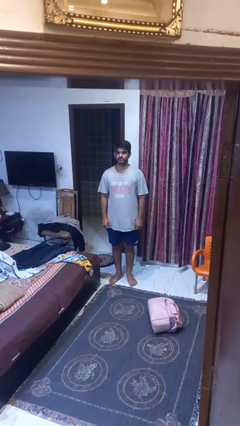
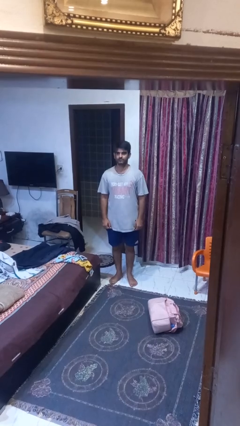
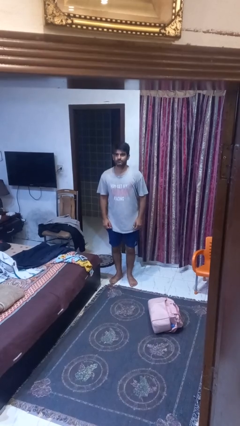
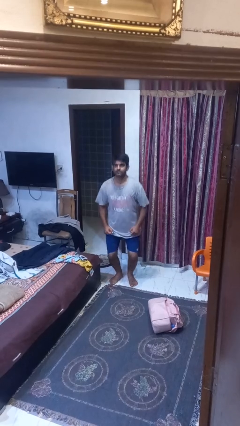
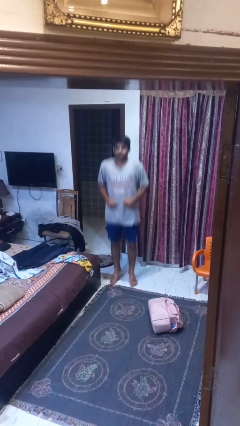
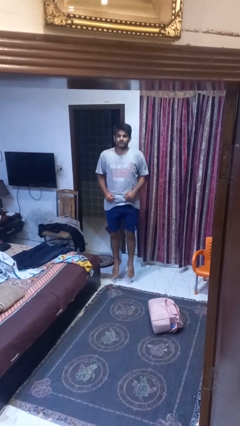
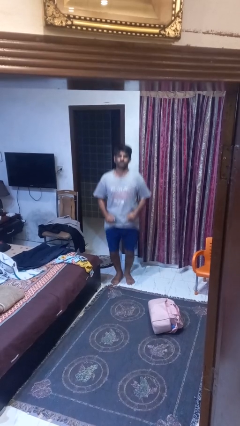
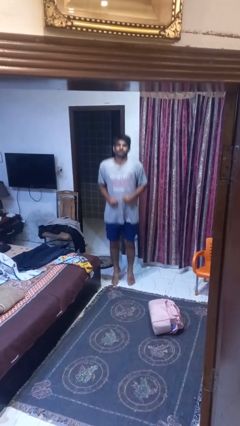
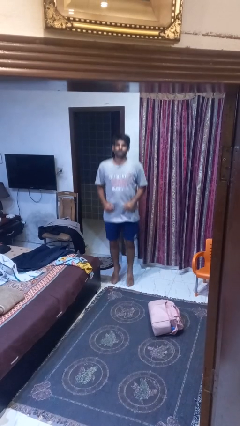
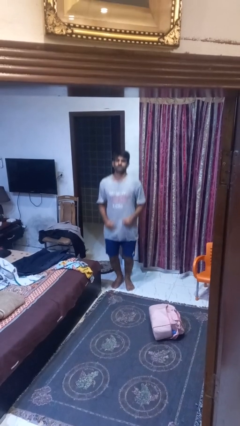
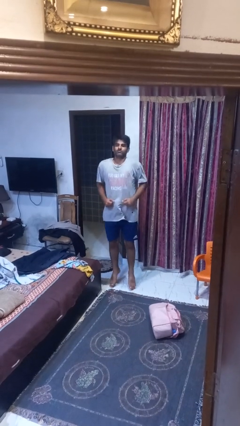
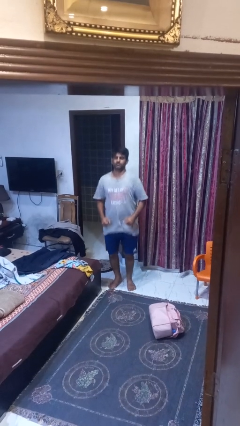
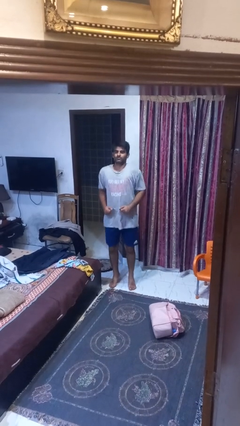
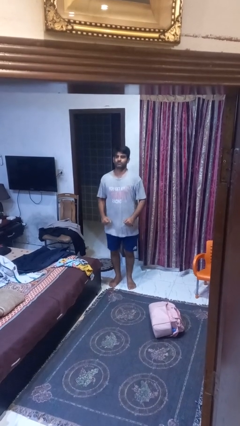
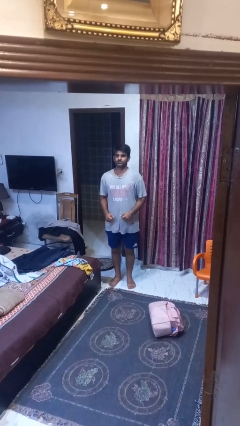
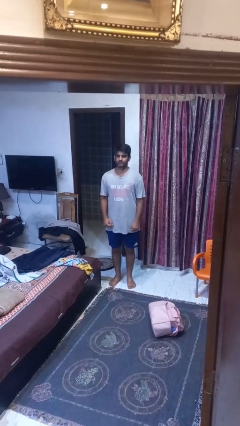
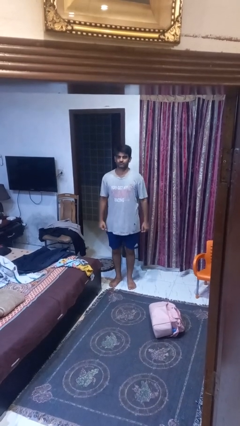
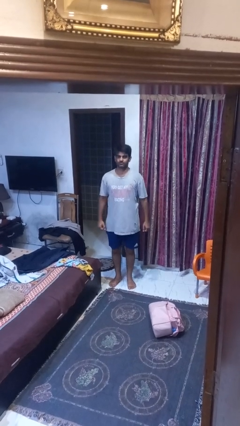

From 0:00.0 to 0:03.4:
person jumps

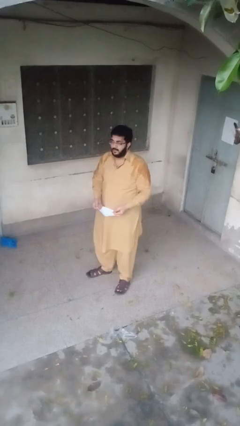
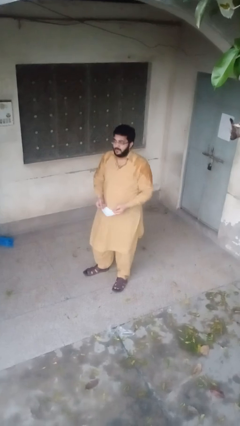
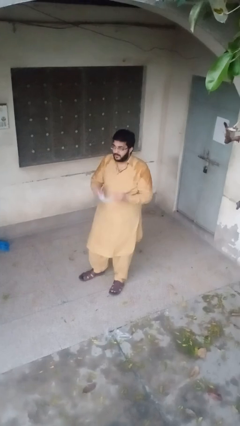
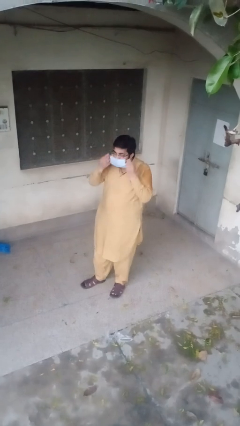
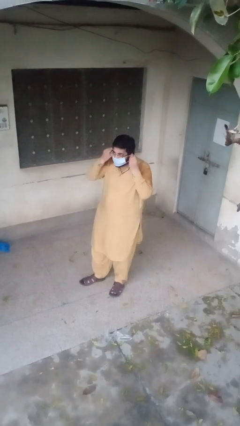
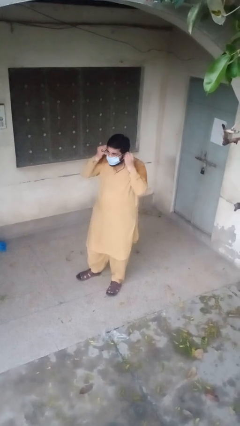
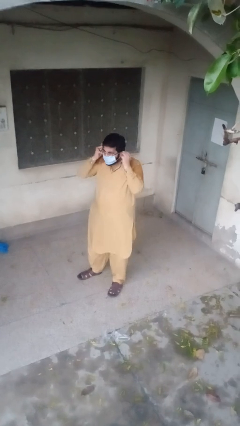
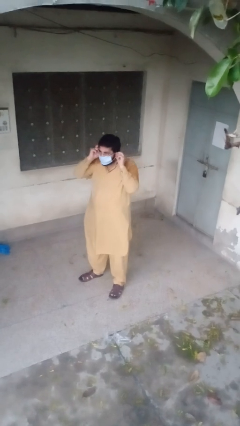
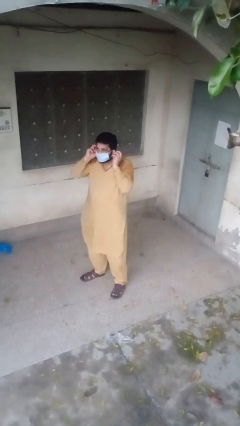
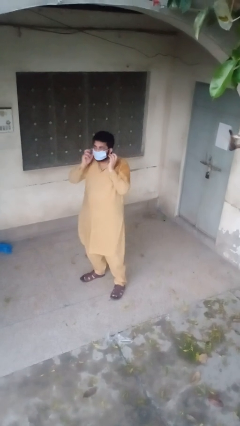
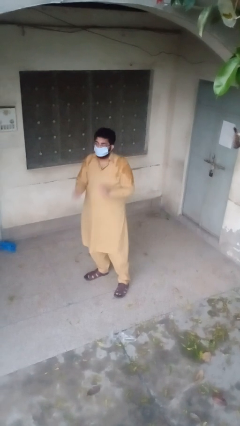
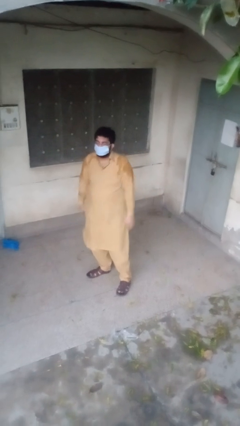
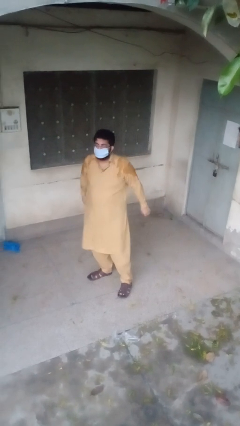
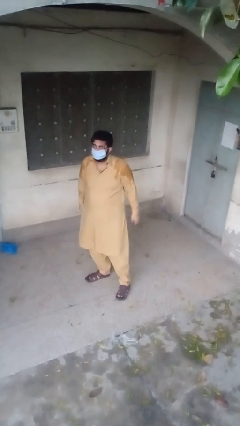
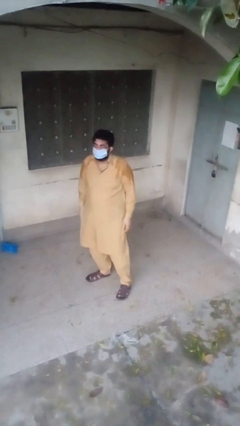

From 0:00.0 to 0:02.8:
person puts on facemask

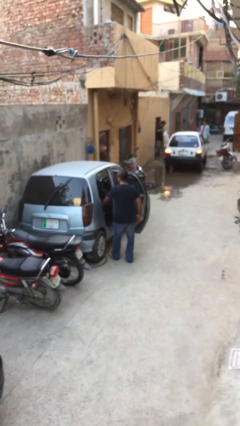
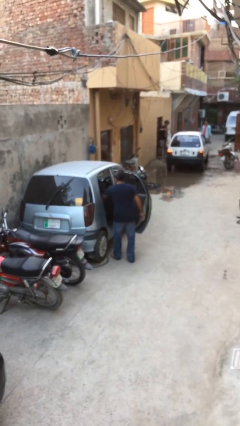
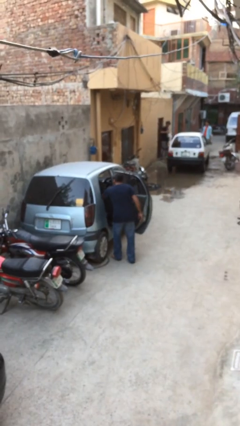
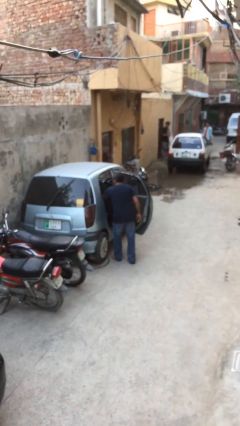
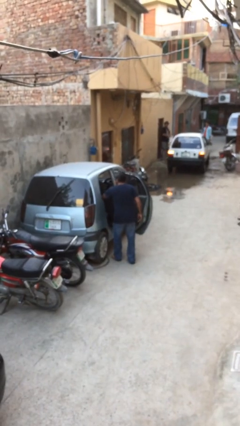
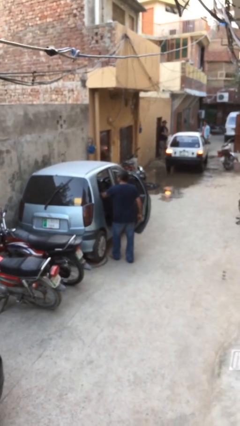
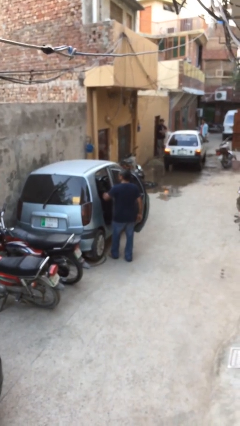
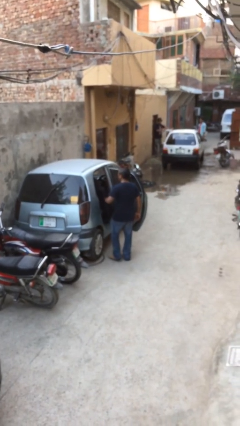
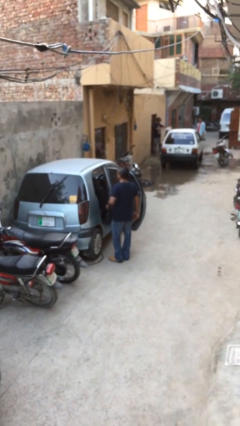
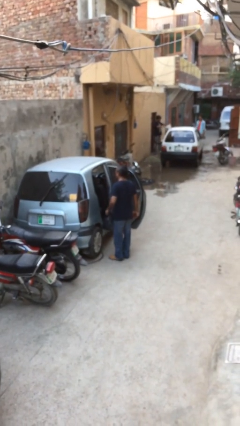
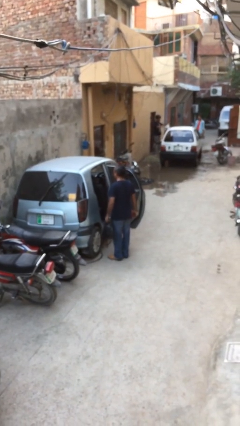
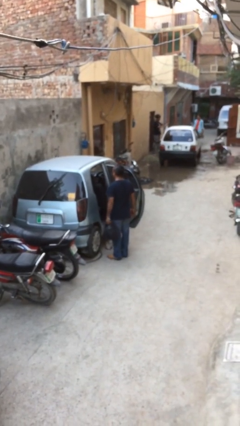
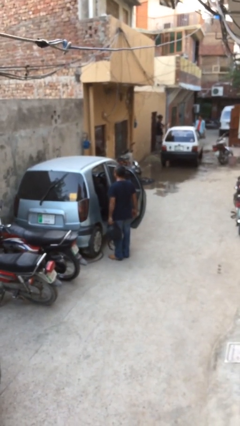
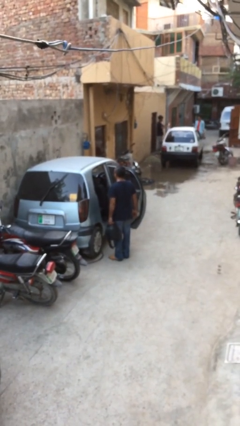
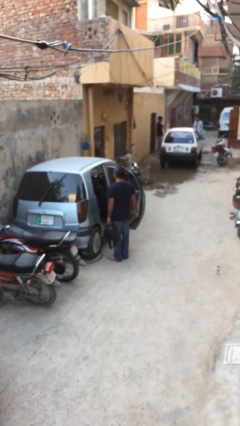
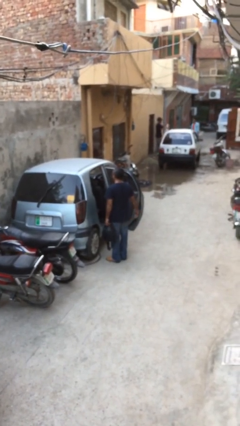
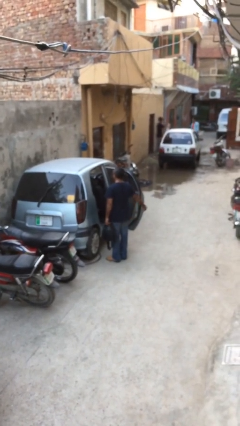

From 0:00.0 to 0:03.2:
person unloads car

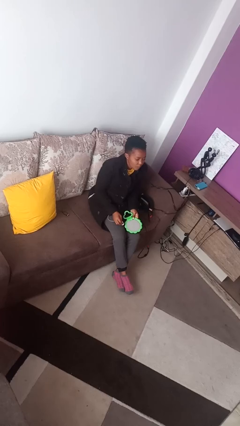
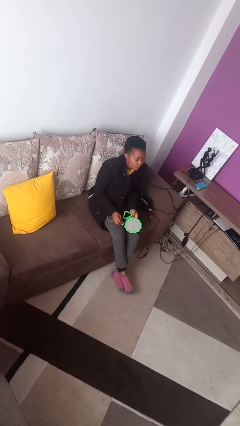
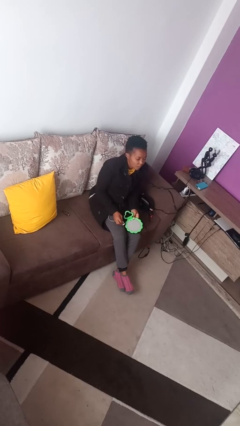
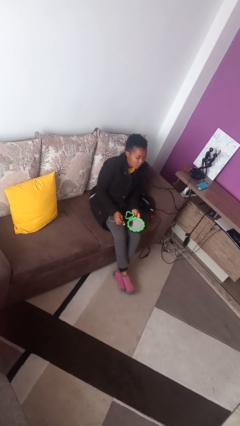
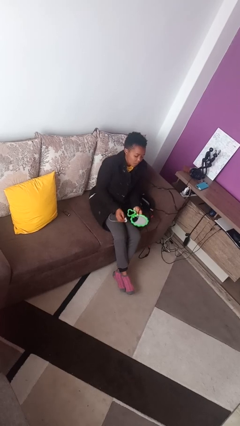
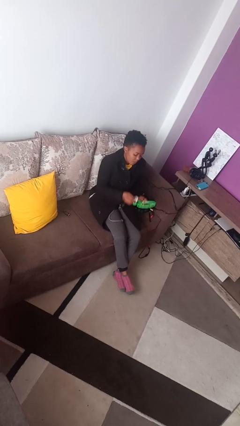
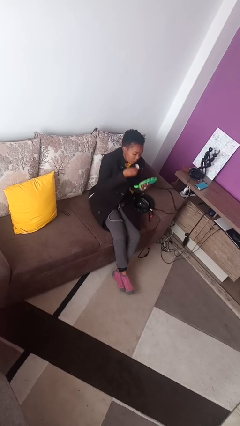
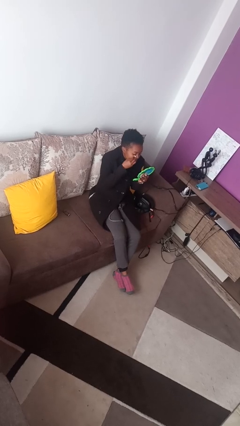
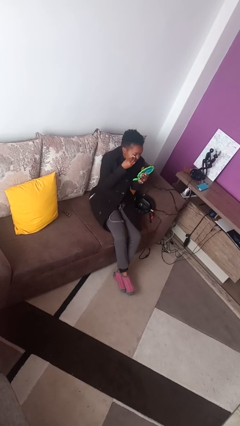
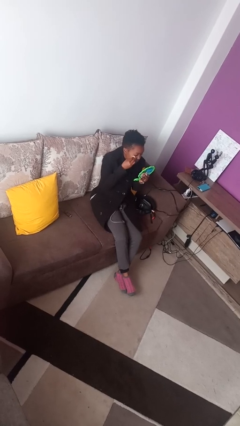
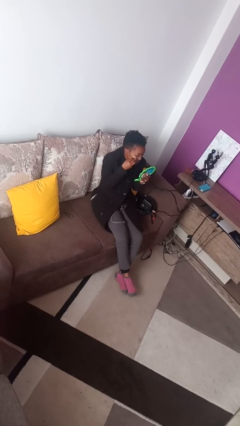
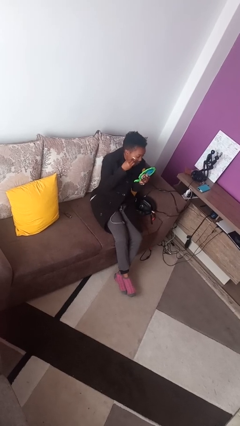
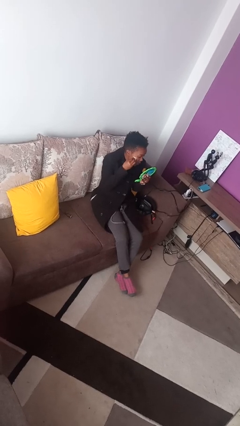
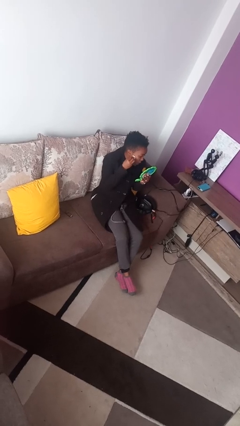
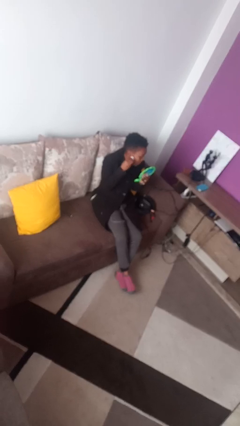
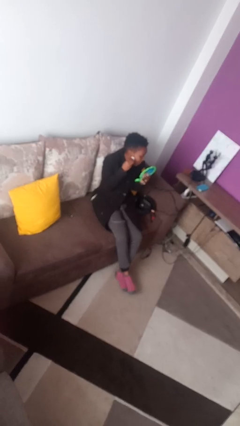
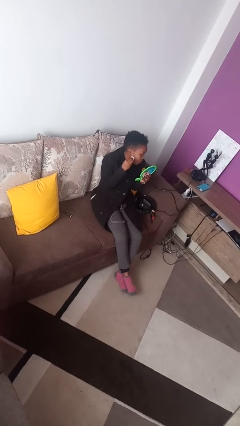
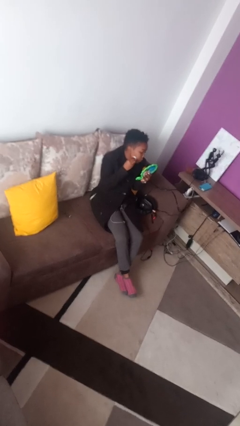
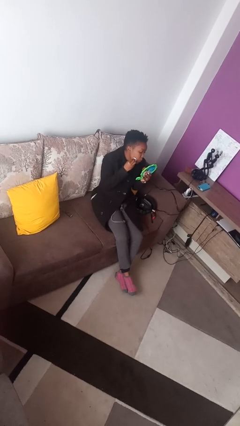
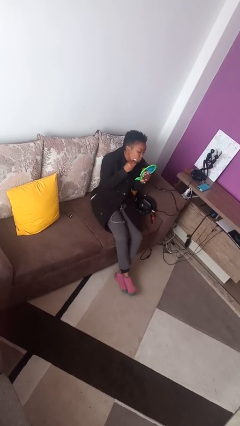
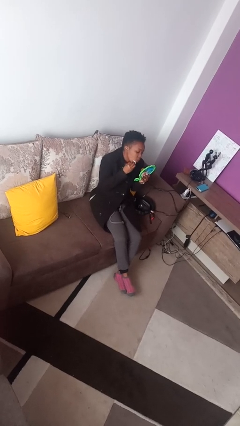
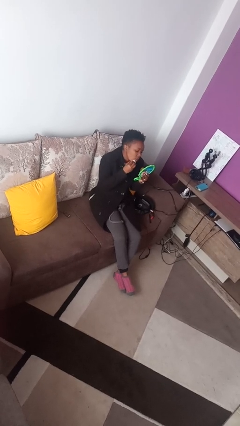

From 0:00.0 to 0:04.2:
person applies foundation makeup

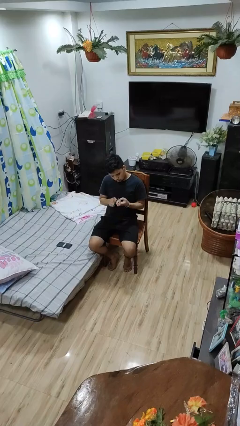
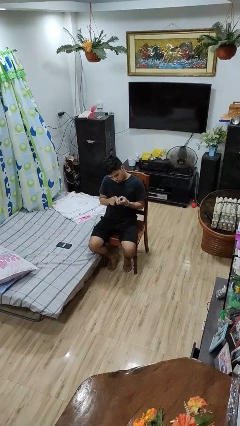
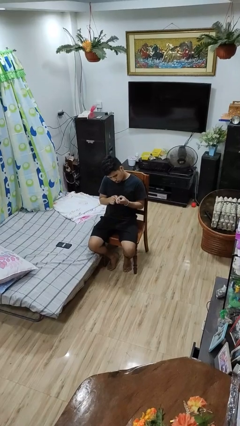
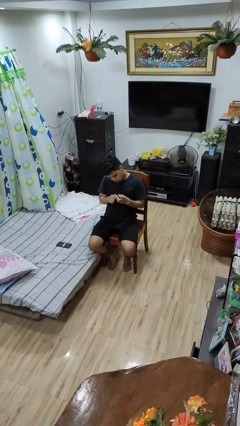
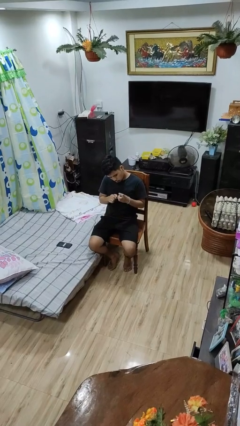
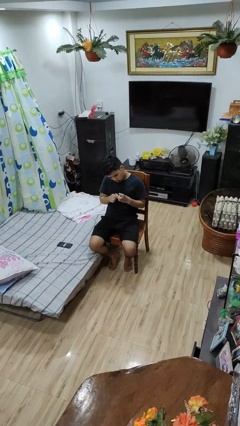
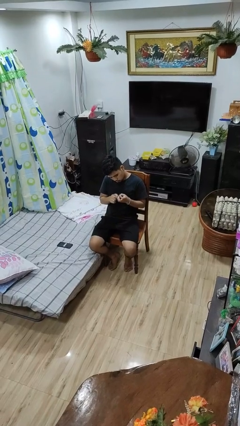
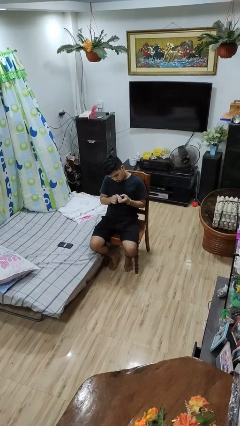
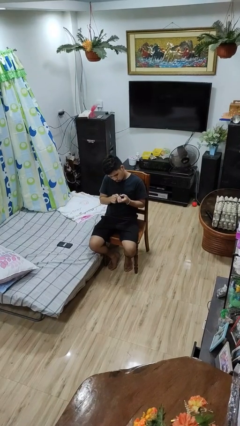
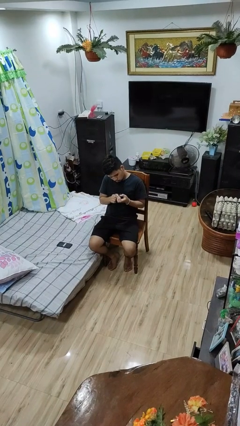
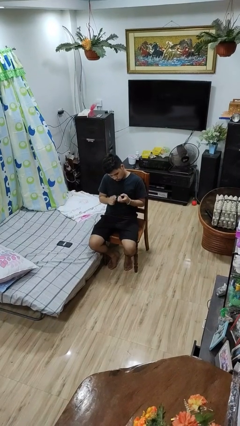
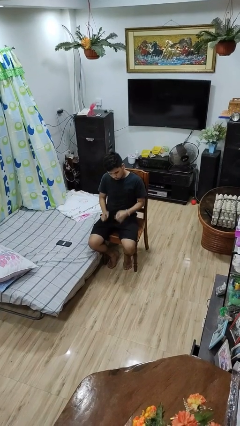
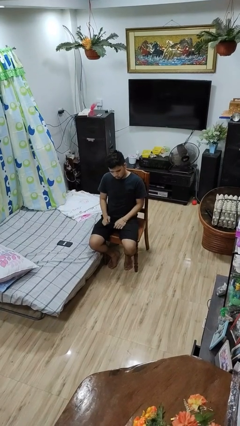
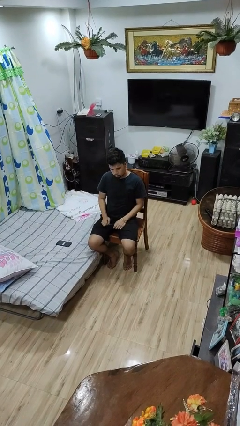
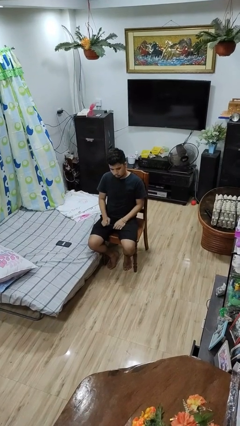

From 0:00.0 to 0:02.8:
person files fingernails

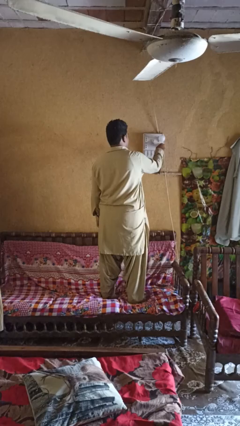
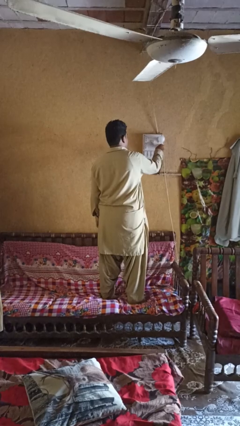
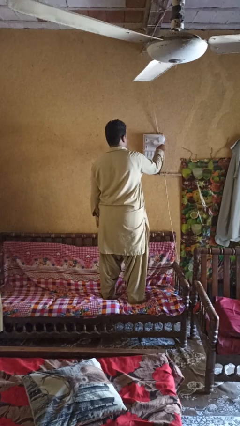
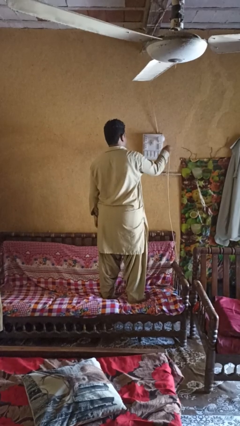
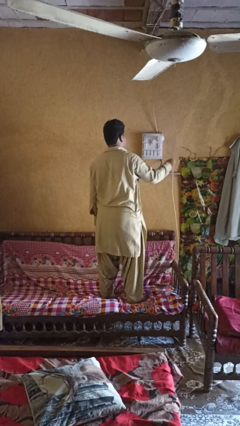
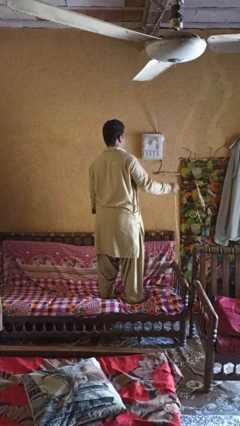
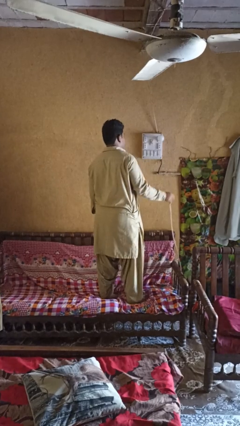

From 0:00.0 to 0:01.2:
person unplugs from electrical socket
